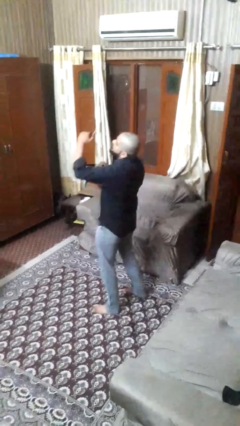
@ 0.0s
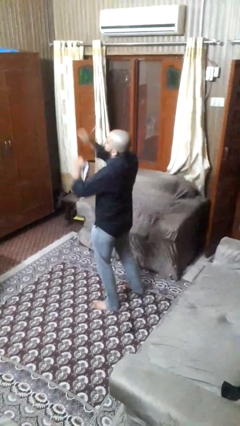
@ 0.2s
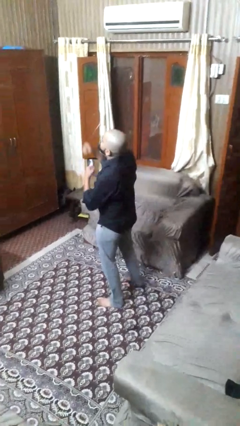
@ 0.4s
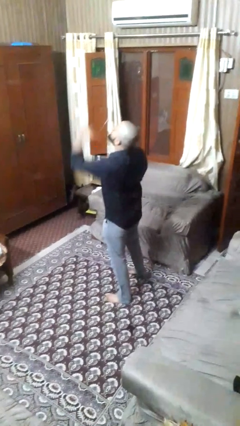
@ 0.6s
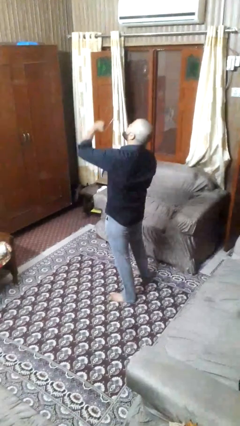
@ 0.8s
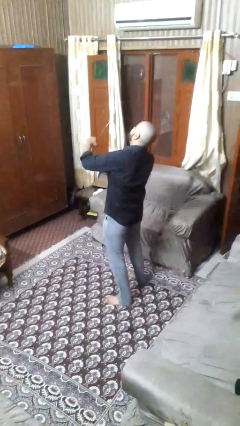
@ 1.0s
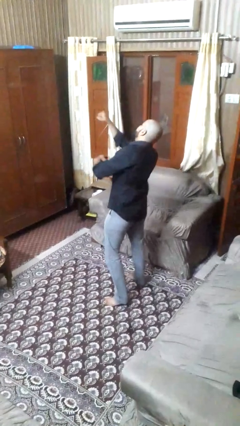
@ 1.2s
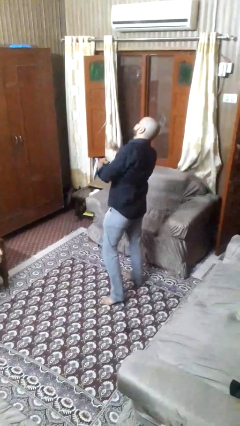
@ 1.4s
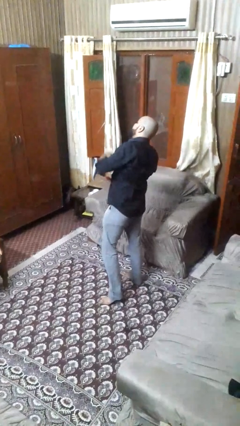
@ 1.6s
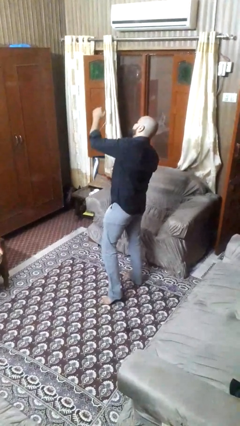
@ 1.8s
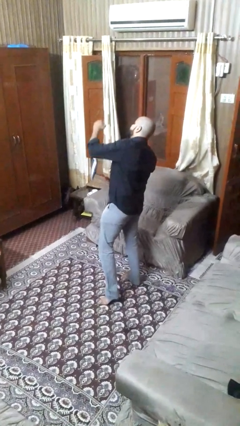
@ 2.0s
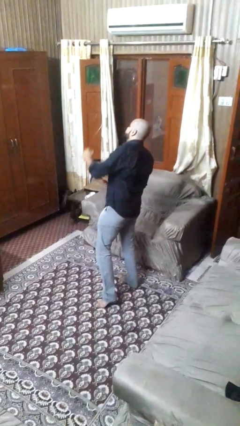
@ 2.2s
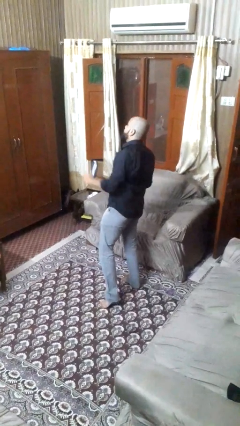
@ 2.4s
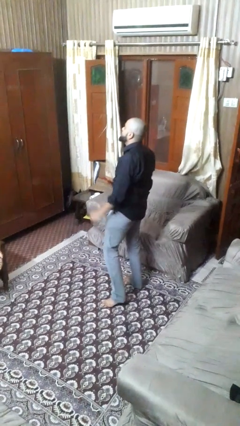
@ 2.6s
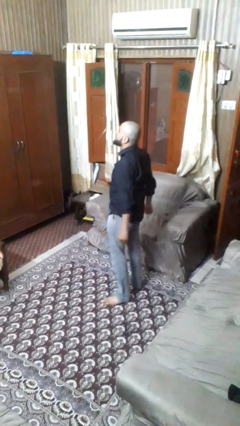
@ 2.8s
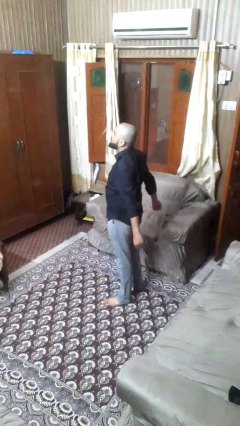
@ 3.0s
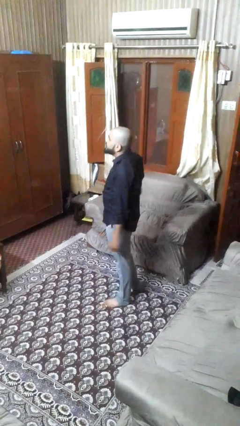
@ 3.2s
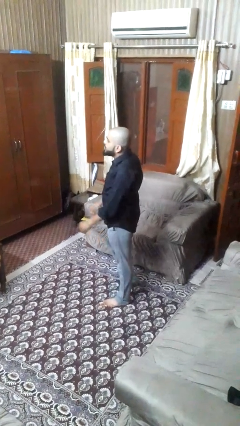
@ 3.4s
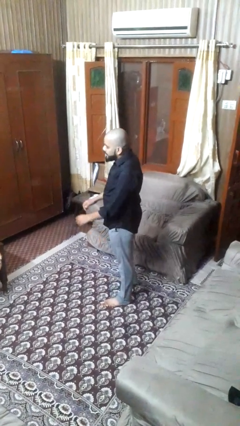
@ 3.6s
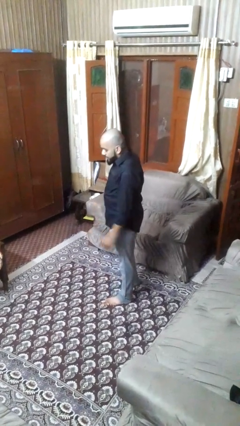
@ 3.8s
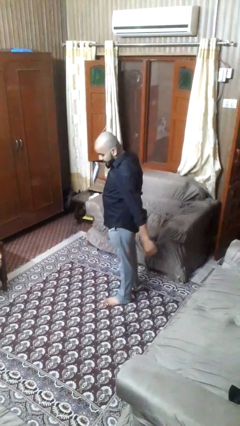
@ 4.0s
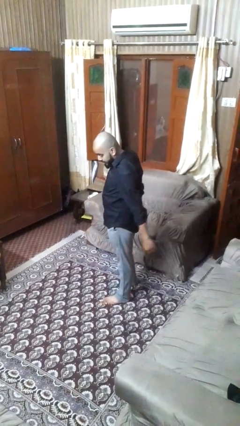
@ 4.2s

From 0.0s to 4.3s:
person punches

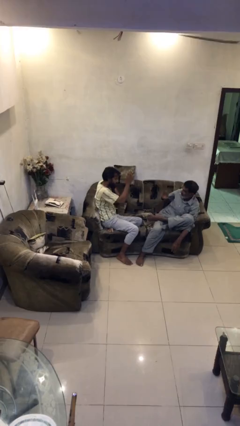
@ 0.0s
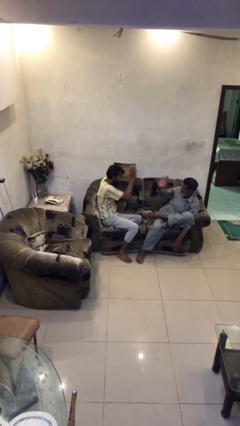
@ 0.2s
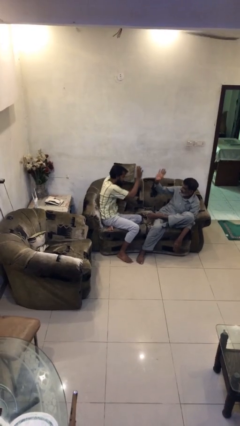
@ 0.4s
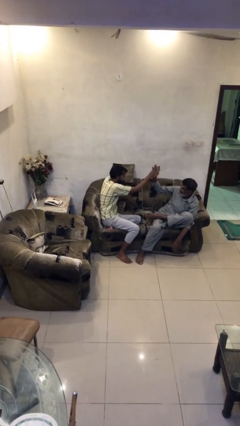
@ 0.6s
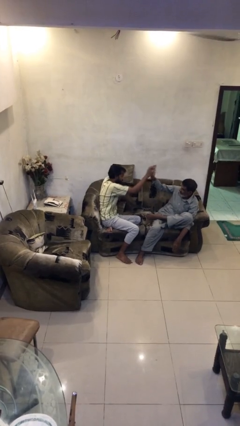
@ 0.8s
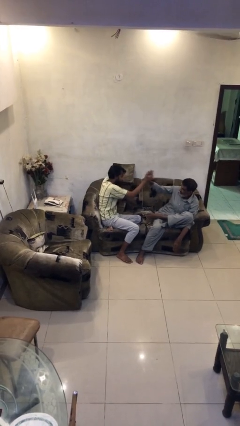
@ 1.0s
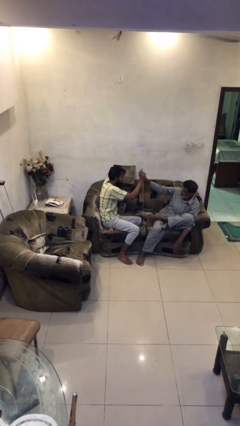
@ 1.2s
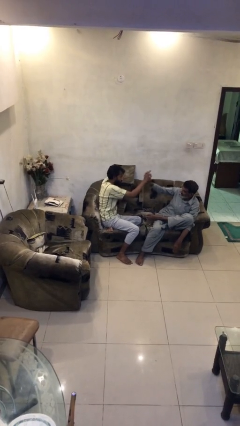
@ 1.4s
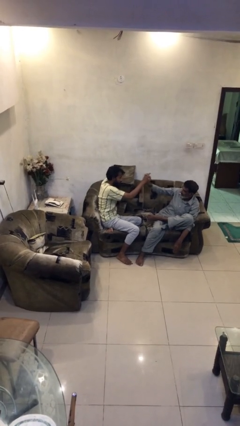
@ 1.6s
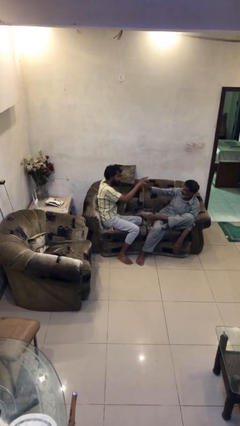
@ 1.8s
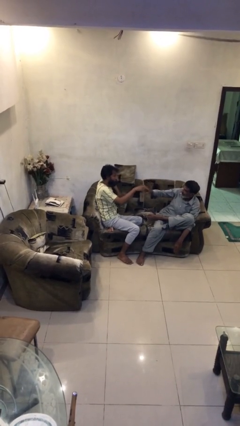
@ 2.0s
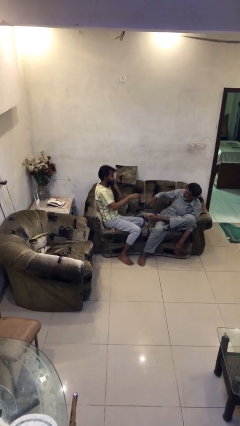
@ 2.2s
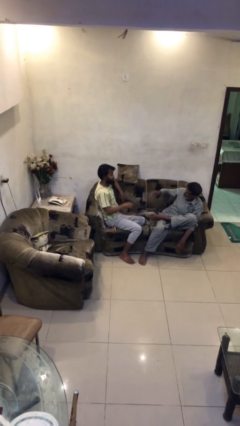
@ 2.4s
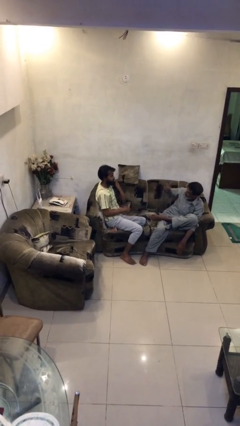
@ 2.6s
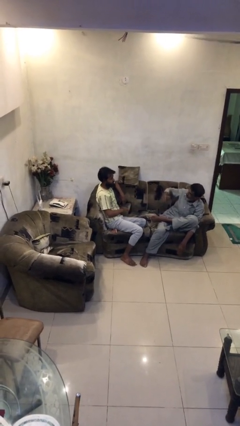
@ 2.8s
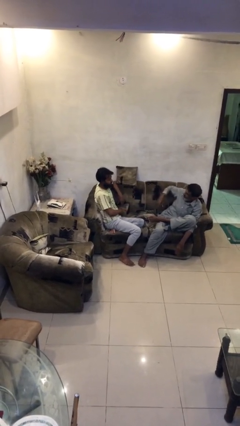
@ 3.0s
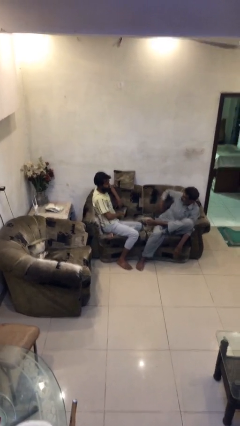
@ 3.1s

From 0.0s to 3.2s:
person highfives hand

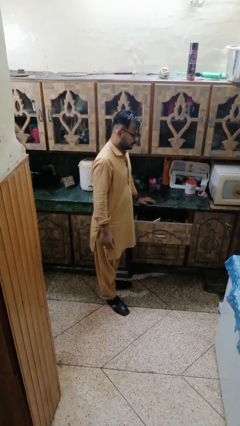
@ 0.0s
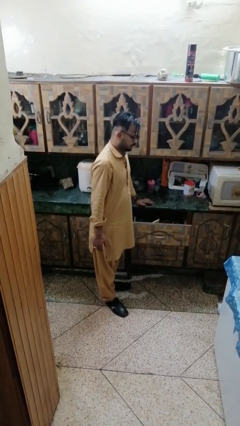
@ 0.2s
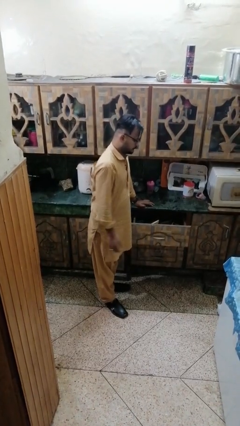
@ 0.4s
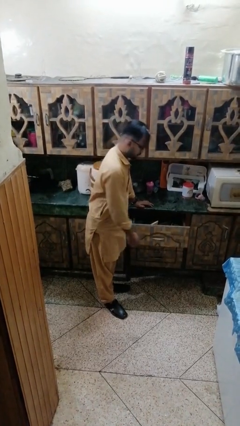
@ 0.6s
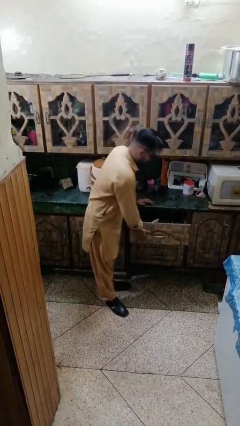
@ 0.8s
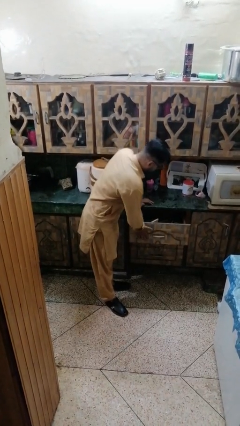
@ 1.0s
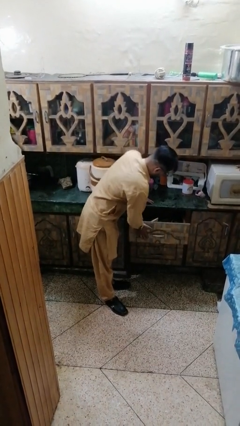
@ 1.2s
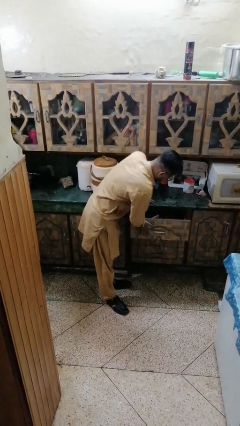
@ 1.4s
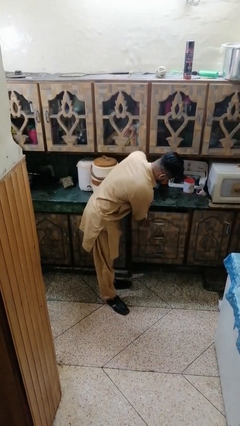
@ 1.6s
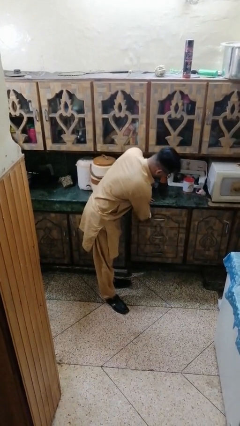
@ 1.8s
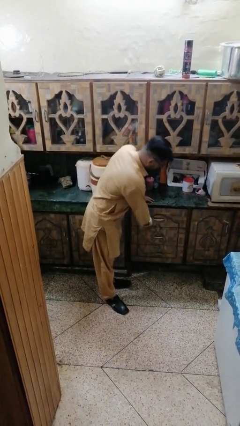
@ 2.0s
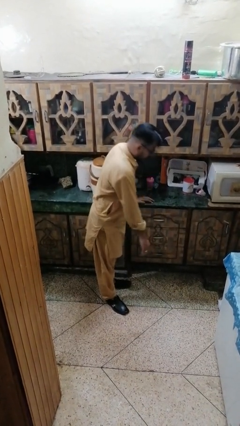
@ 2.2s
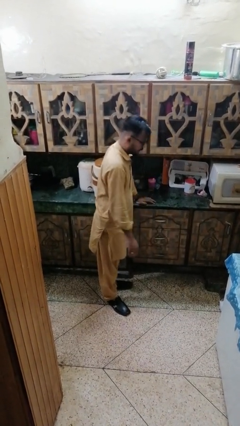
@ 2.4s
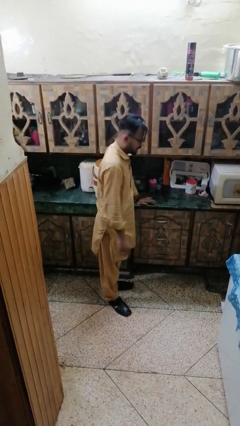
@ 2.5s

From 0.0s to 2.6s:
person closes kitchen drawer

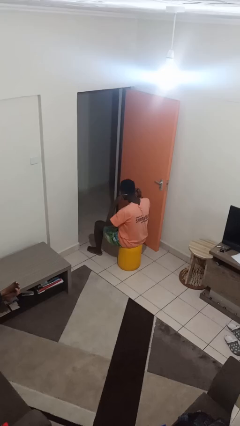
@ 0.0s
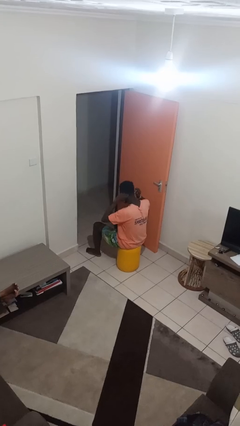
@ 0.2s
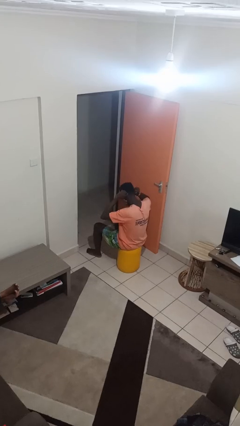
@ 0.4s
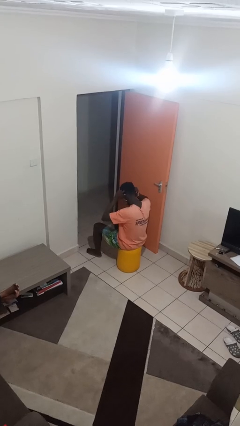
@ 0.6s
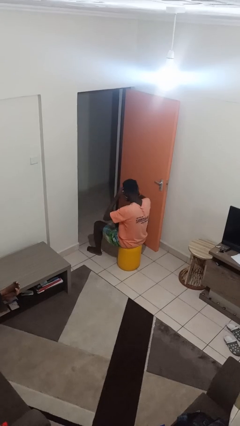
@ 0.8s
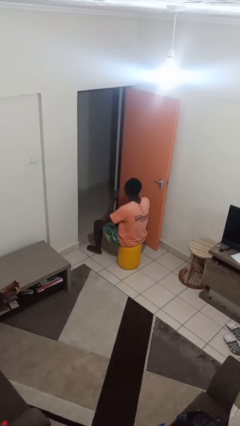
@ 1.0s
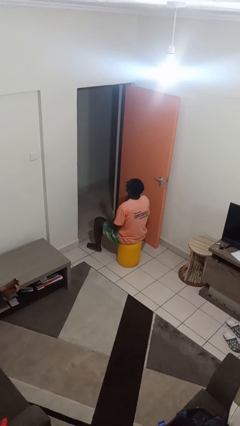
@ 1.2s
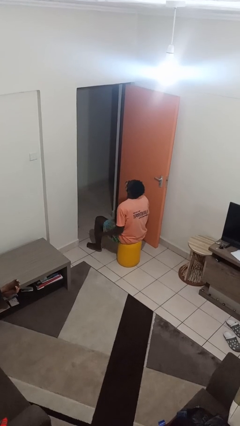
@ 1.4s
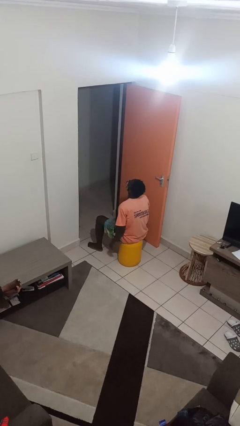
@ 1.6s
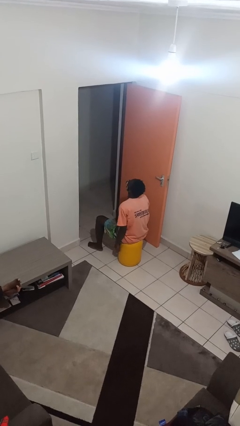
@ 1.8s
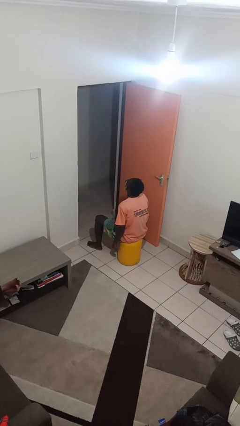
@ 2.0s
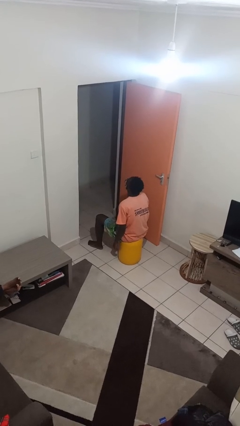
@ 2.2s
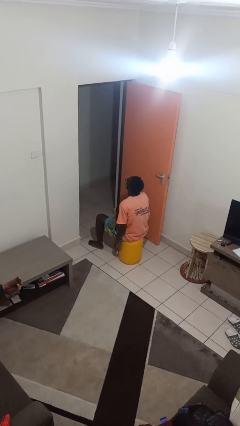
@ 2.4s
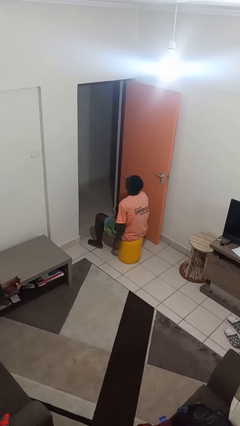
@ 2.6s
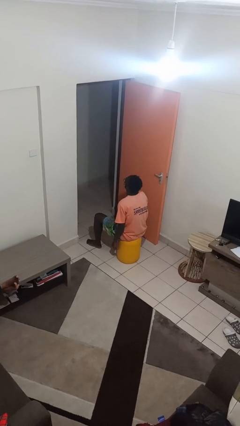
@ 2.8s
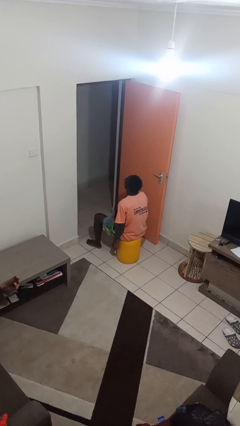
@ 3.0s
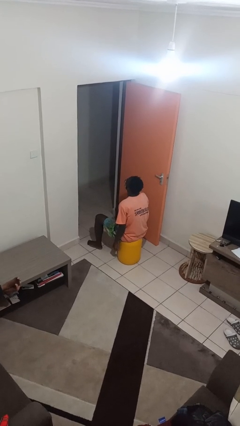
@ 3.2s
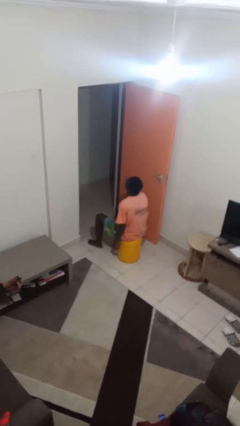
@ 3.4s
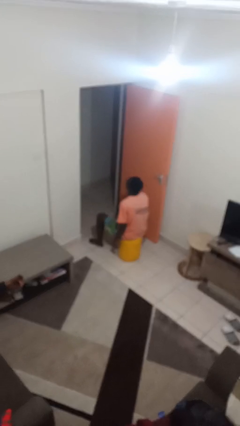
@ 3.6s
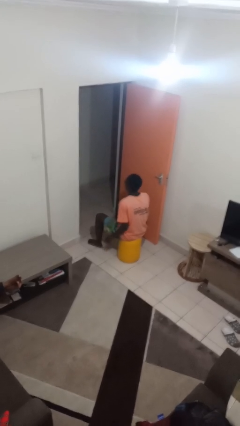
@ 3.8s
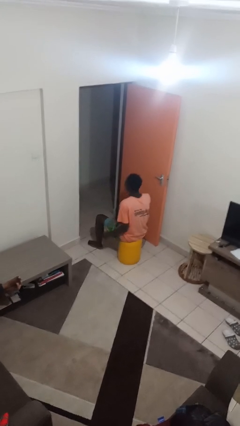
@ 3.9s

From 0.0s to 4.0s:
person puts on facemask

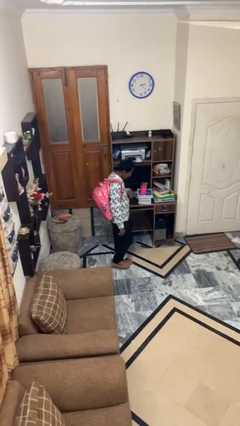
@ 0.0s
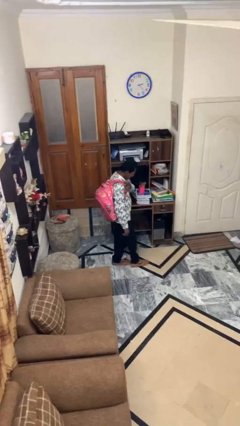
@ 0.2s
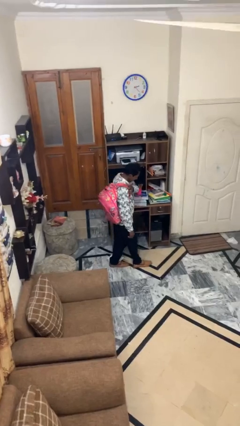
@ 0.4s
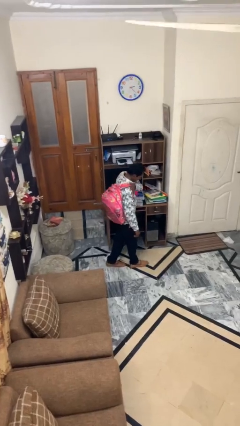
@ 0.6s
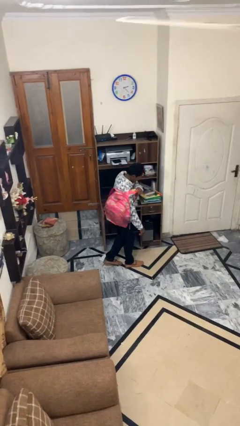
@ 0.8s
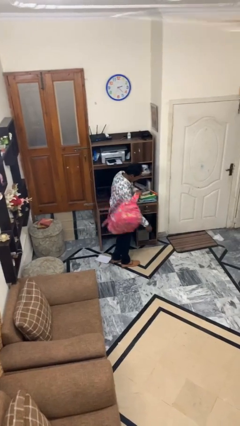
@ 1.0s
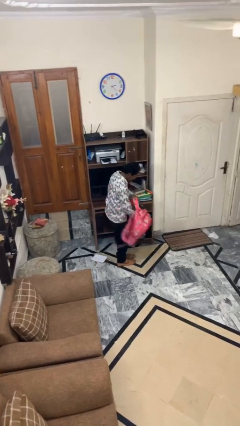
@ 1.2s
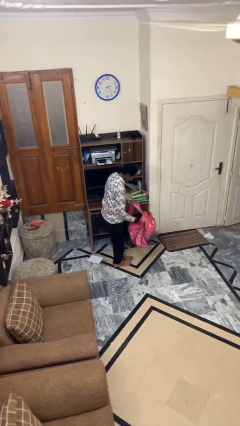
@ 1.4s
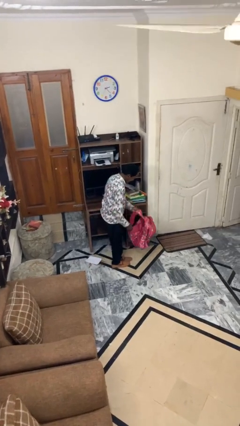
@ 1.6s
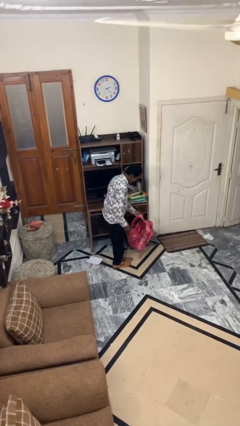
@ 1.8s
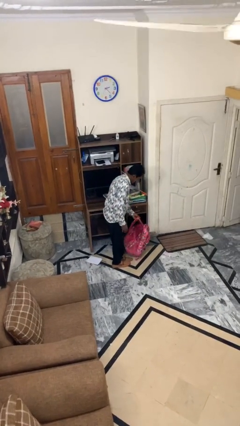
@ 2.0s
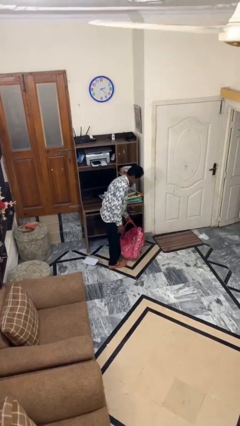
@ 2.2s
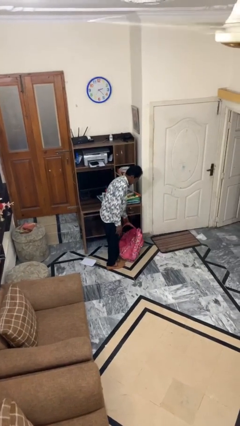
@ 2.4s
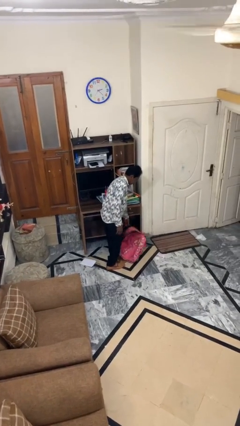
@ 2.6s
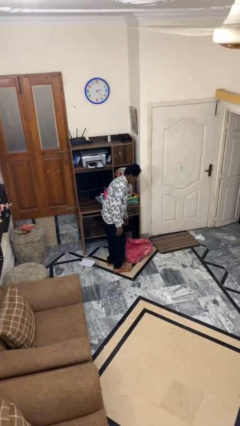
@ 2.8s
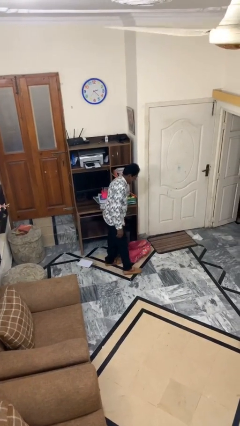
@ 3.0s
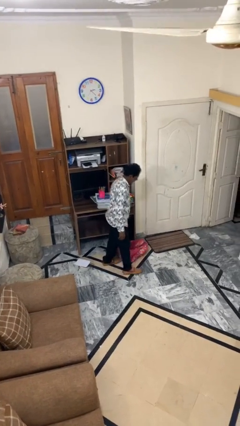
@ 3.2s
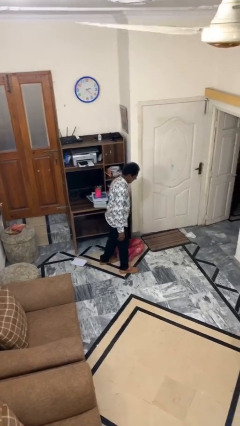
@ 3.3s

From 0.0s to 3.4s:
person puts down object on floor

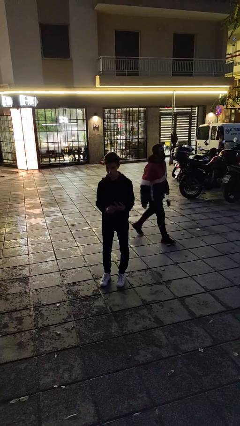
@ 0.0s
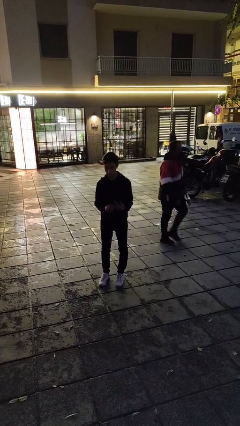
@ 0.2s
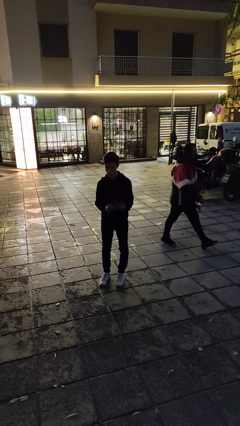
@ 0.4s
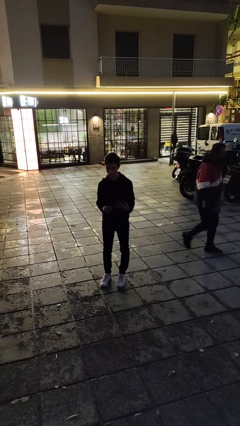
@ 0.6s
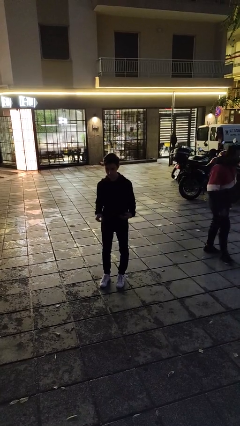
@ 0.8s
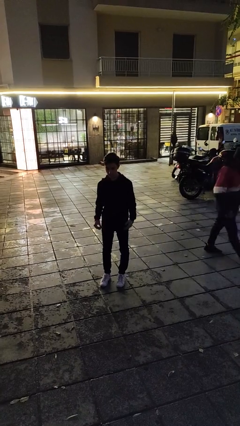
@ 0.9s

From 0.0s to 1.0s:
person takes off ring
